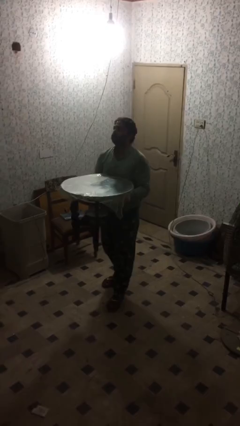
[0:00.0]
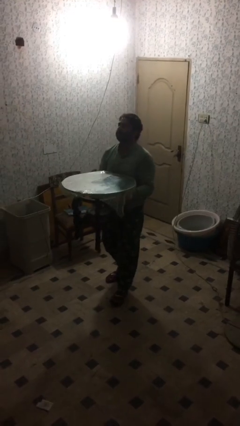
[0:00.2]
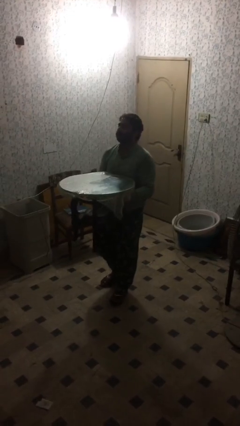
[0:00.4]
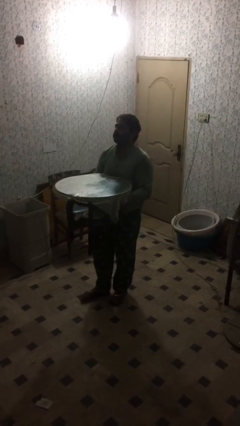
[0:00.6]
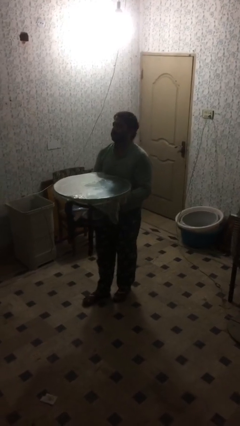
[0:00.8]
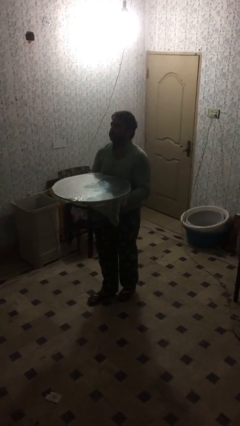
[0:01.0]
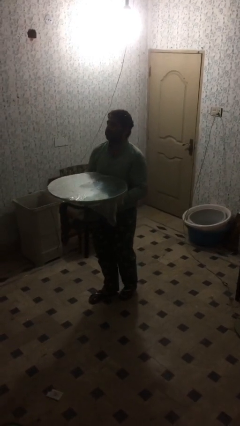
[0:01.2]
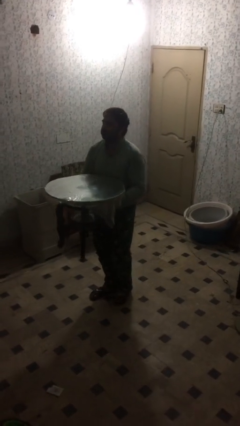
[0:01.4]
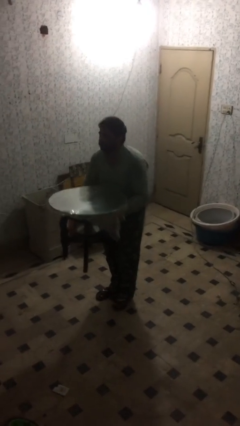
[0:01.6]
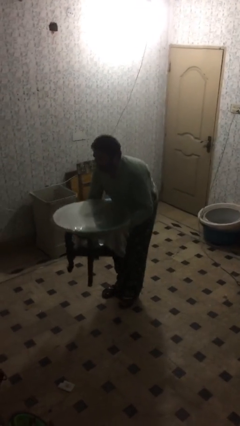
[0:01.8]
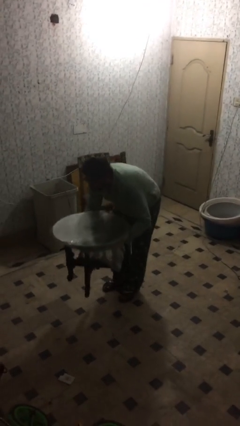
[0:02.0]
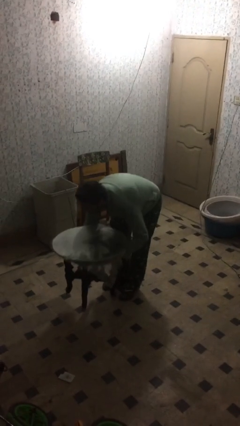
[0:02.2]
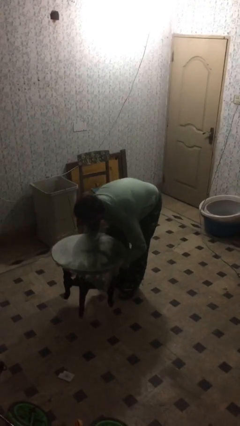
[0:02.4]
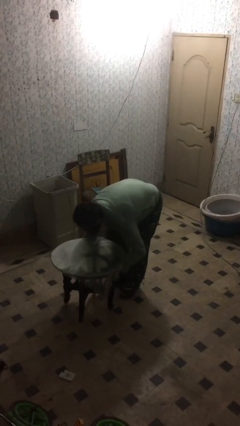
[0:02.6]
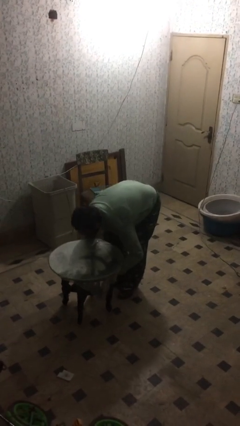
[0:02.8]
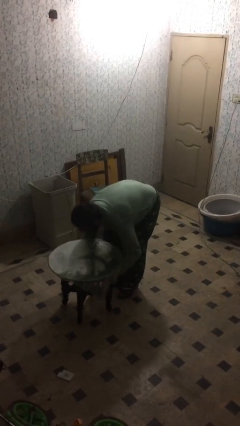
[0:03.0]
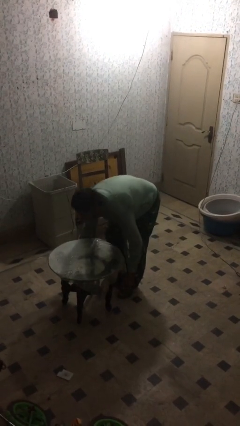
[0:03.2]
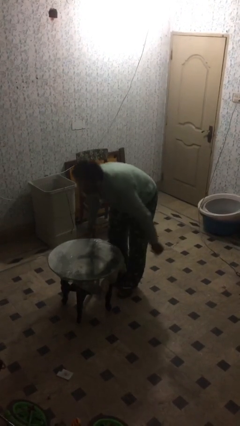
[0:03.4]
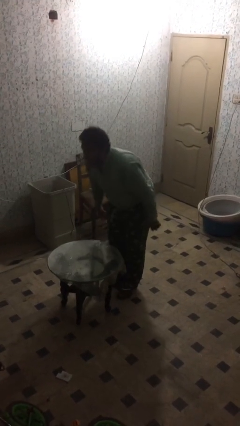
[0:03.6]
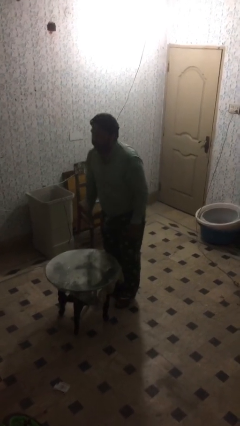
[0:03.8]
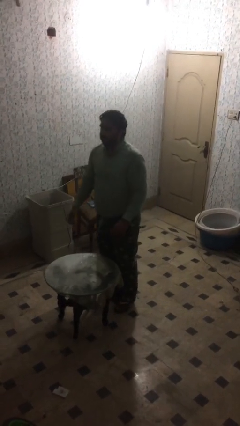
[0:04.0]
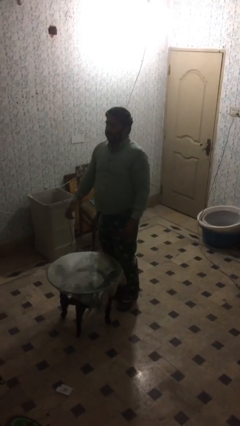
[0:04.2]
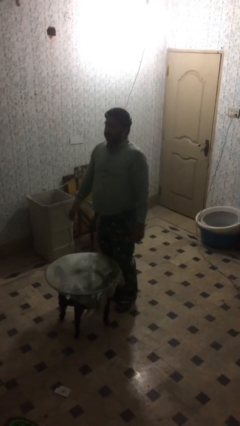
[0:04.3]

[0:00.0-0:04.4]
person puts down object on floor

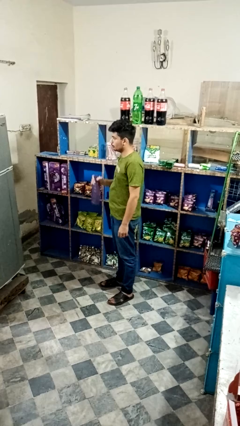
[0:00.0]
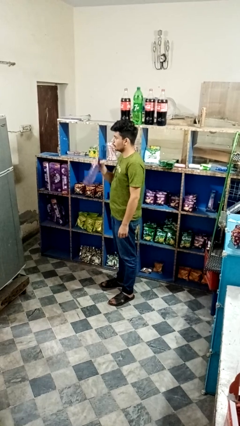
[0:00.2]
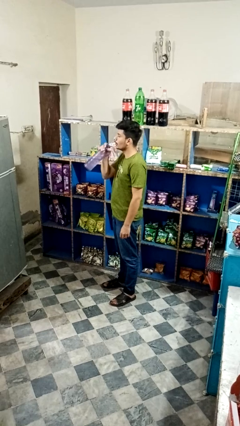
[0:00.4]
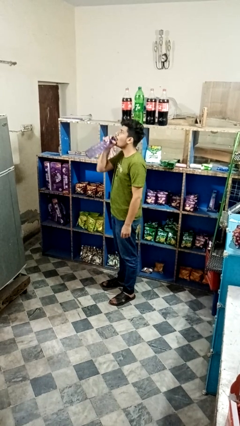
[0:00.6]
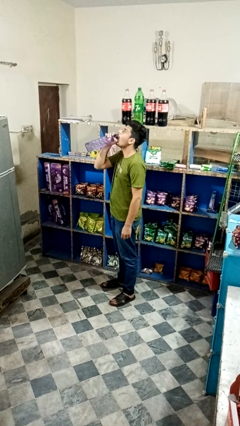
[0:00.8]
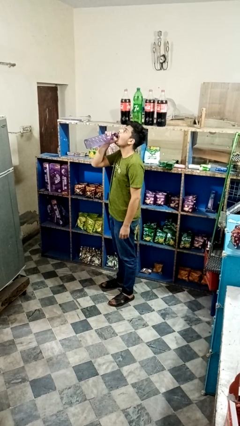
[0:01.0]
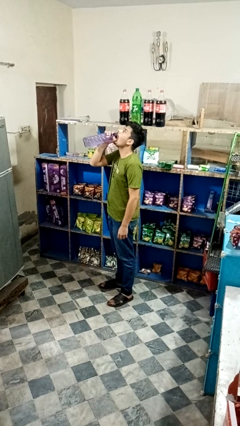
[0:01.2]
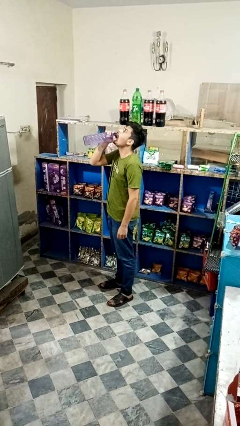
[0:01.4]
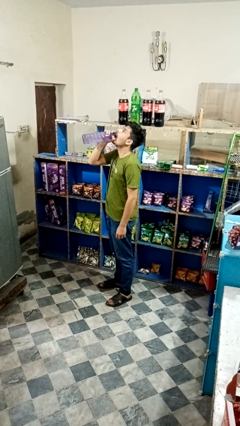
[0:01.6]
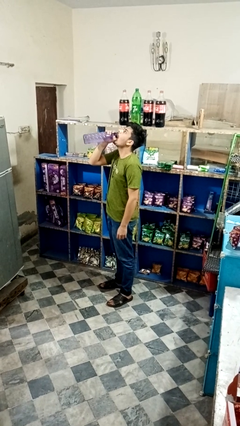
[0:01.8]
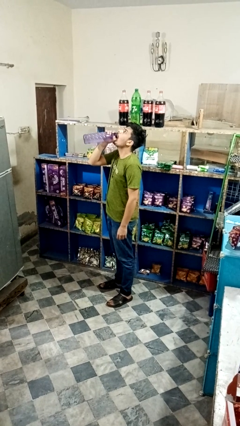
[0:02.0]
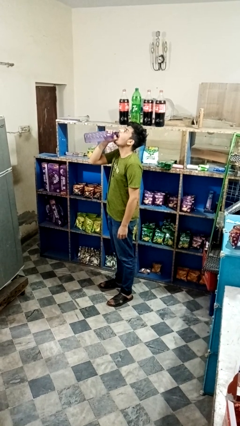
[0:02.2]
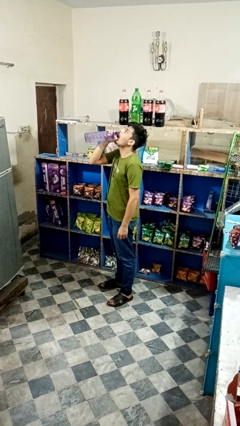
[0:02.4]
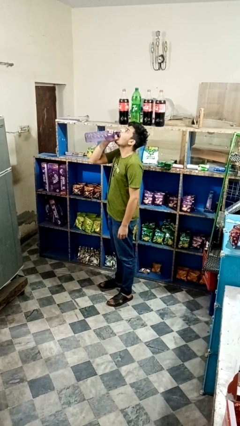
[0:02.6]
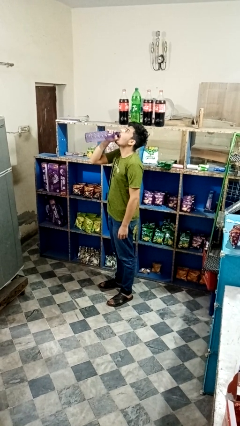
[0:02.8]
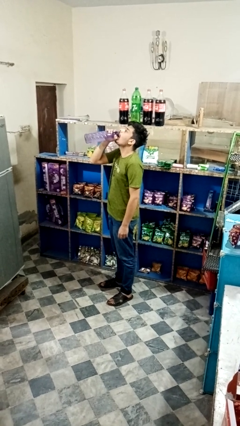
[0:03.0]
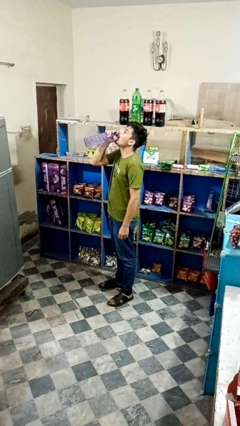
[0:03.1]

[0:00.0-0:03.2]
person drinks from bottle

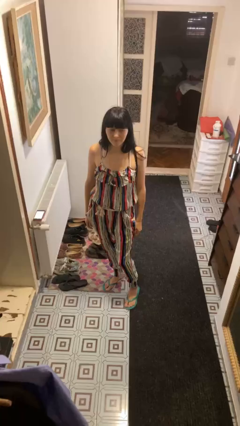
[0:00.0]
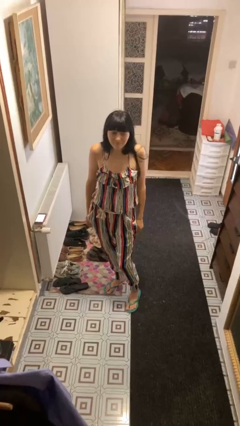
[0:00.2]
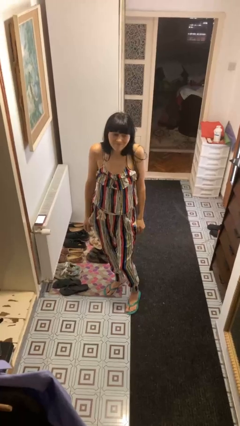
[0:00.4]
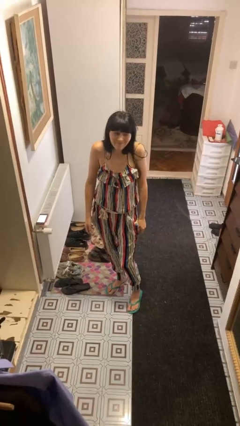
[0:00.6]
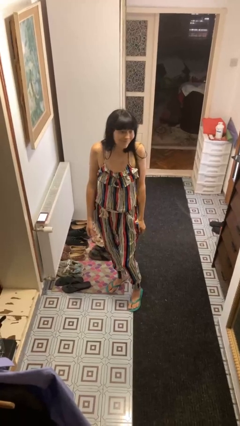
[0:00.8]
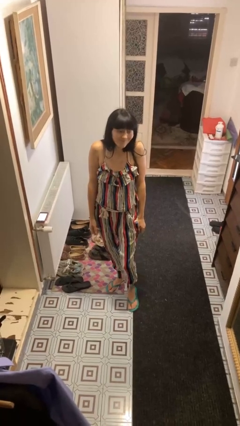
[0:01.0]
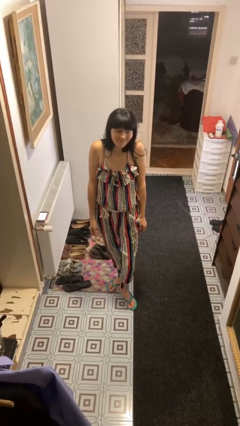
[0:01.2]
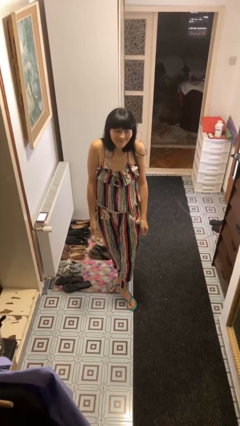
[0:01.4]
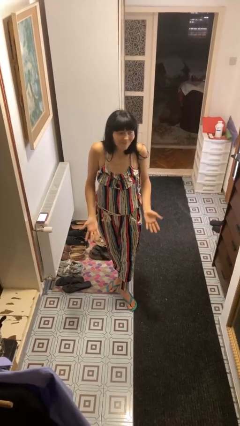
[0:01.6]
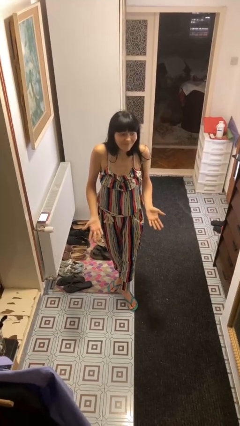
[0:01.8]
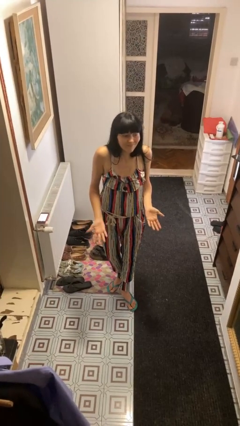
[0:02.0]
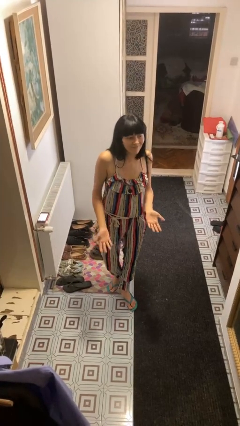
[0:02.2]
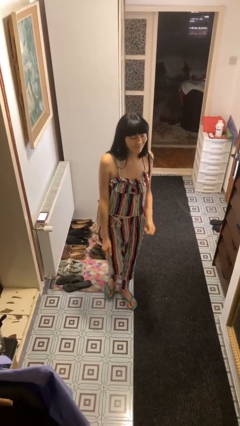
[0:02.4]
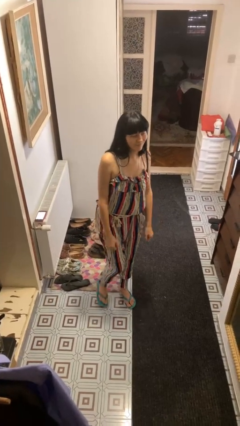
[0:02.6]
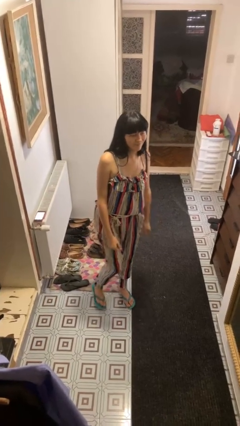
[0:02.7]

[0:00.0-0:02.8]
person shrugs

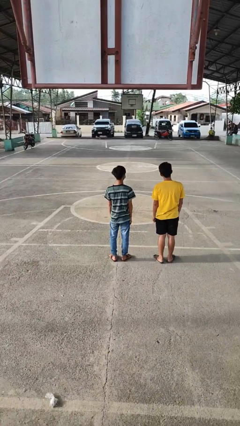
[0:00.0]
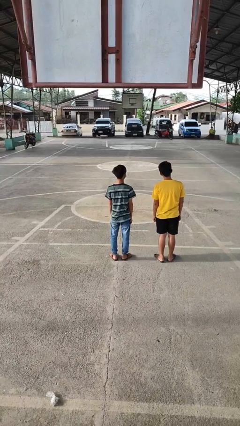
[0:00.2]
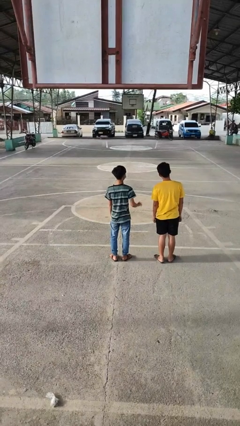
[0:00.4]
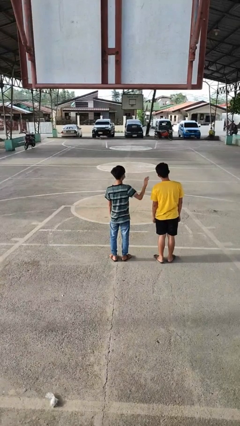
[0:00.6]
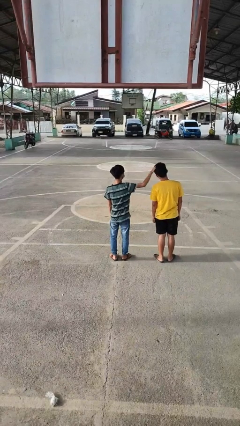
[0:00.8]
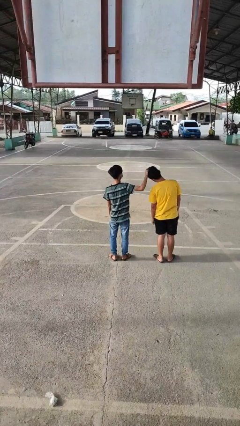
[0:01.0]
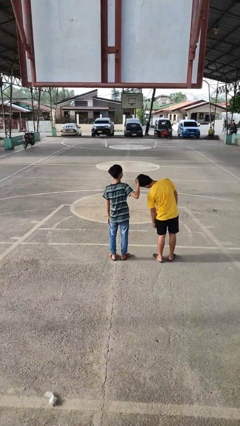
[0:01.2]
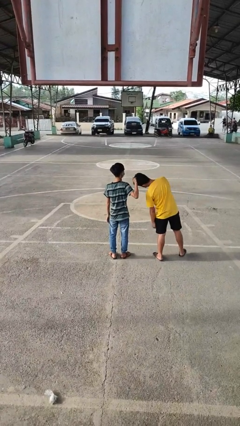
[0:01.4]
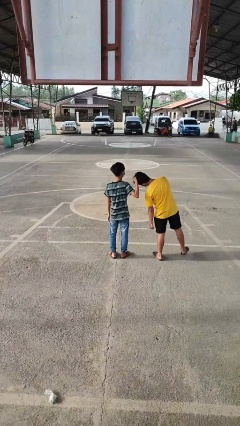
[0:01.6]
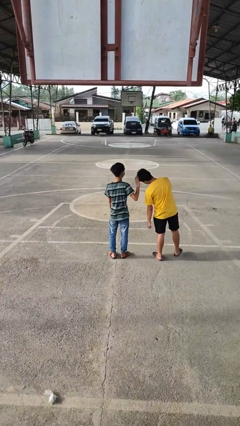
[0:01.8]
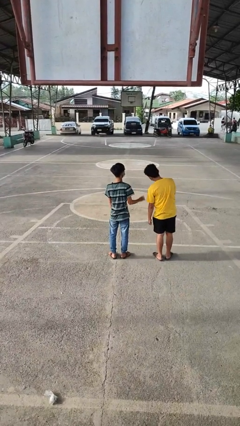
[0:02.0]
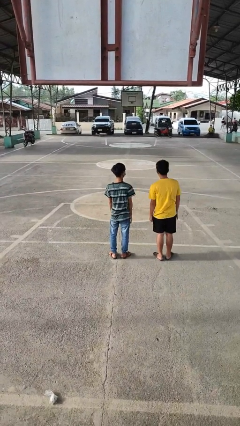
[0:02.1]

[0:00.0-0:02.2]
person grabs person by hair

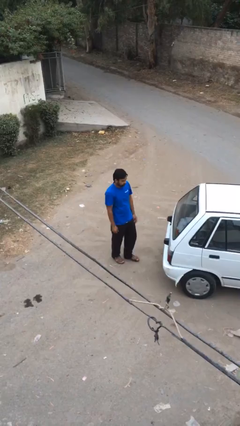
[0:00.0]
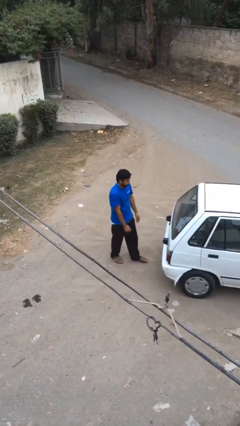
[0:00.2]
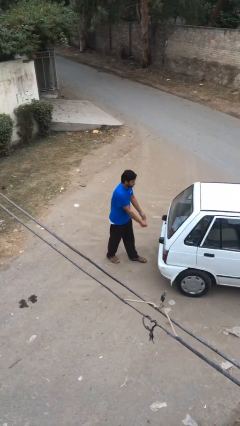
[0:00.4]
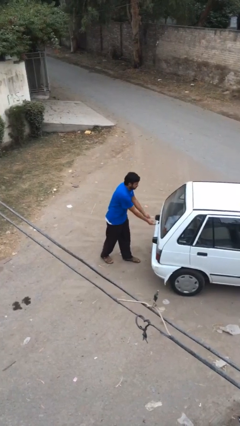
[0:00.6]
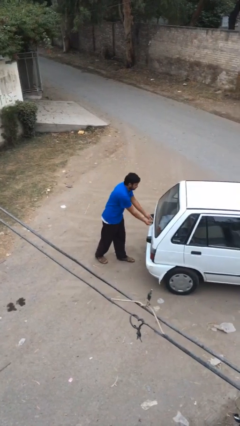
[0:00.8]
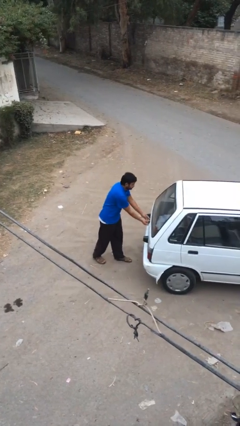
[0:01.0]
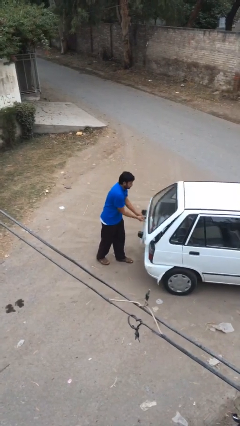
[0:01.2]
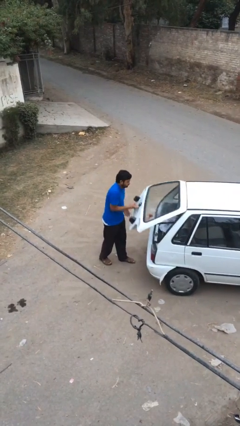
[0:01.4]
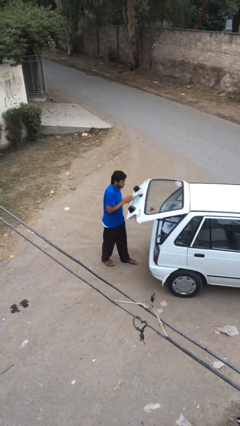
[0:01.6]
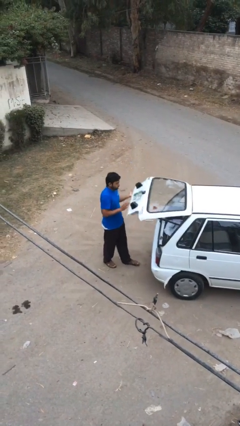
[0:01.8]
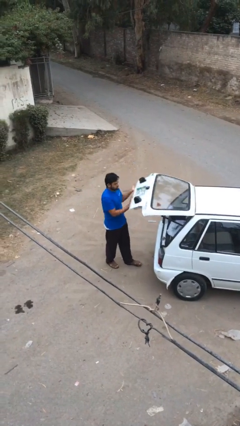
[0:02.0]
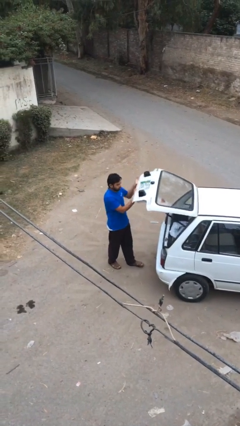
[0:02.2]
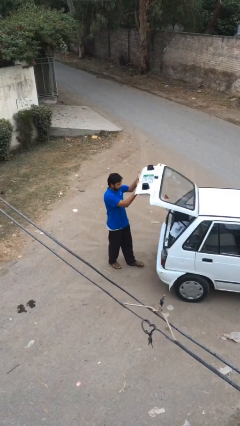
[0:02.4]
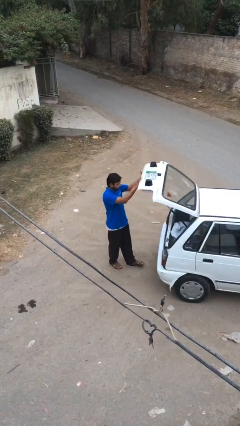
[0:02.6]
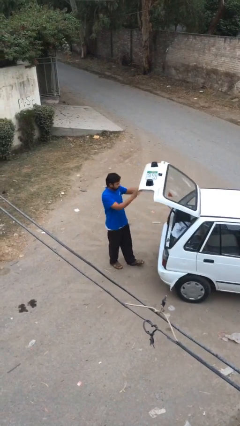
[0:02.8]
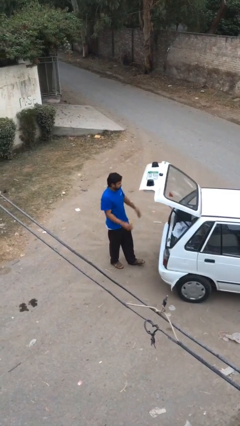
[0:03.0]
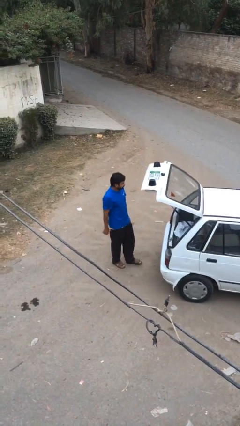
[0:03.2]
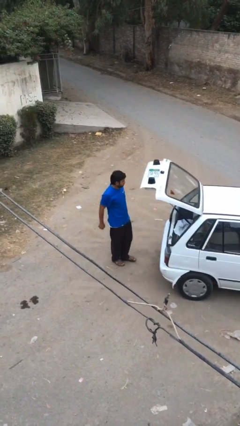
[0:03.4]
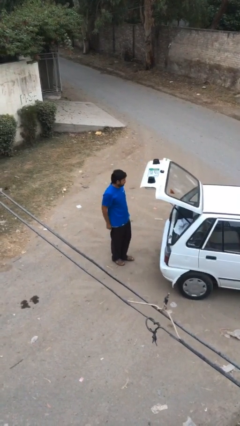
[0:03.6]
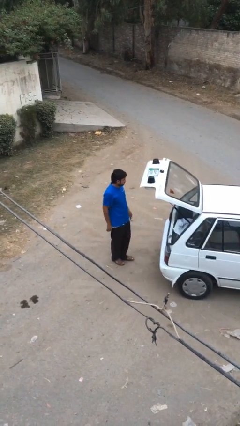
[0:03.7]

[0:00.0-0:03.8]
person opens car trunk

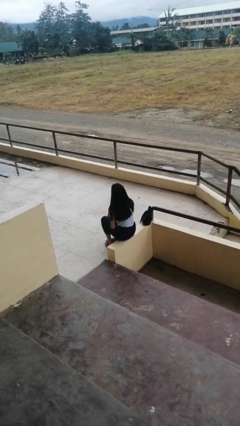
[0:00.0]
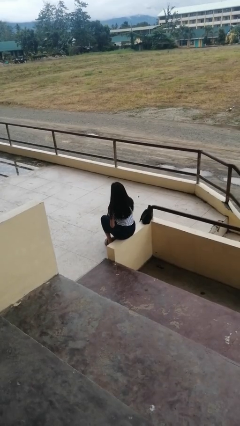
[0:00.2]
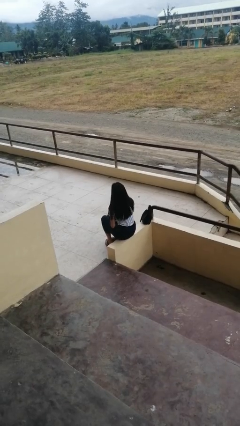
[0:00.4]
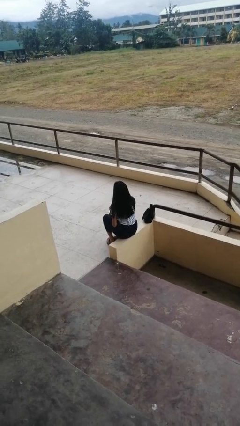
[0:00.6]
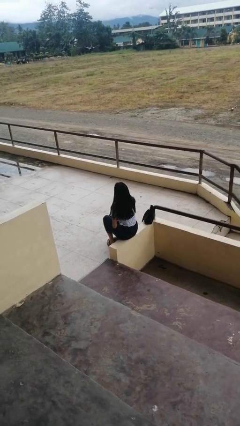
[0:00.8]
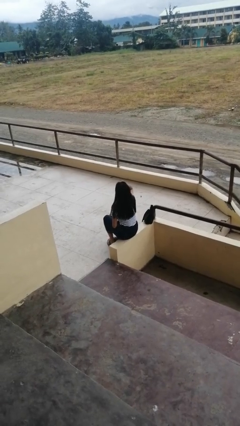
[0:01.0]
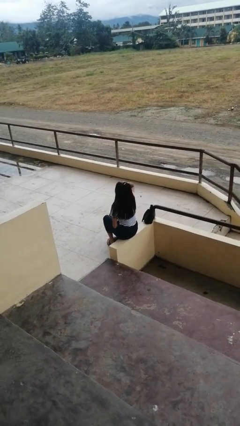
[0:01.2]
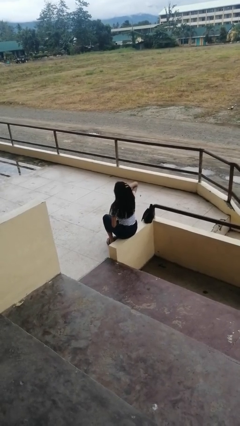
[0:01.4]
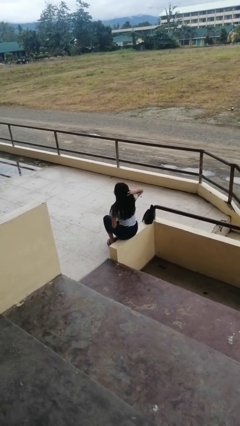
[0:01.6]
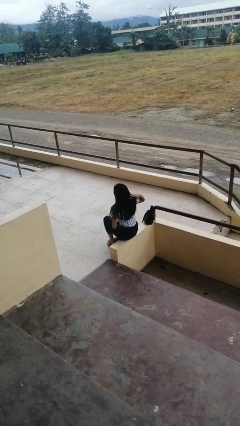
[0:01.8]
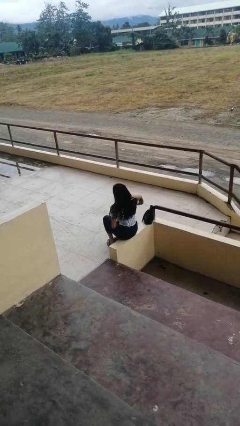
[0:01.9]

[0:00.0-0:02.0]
person strokes hair
